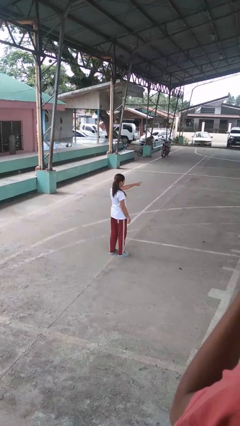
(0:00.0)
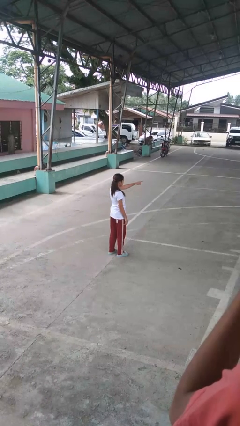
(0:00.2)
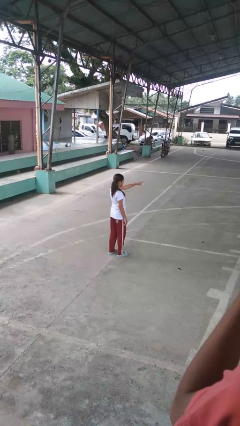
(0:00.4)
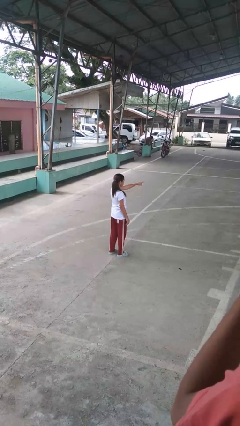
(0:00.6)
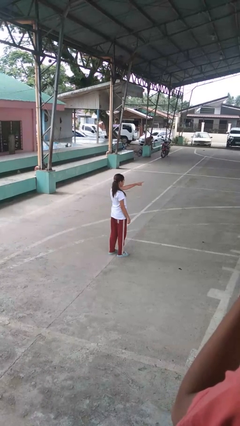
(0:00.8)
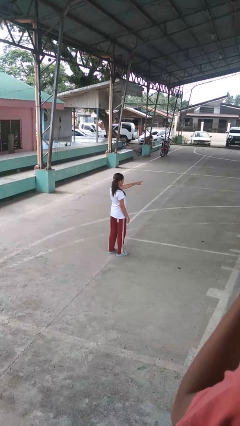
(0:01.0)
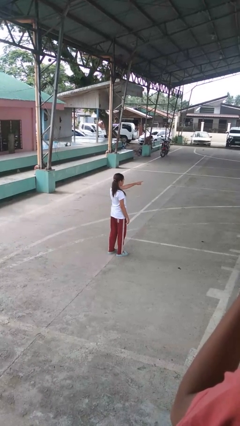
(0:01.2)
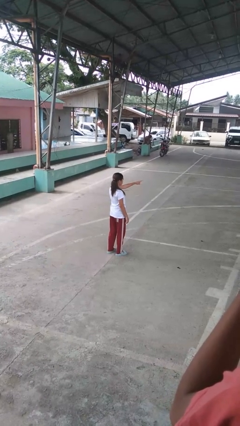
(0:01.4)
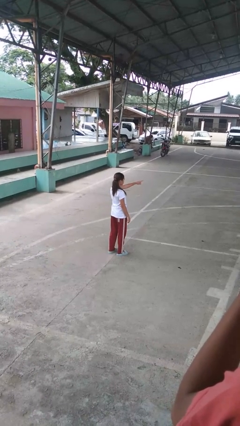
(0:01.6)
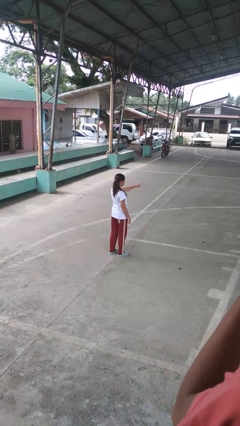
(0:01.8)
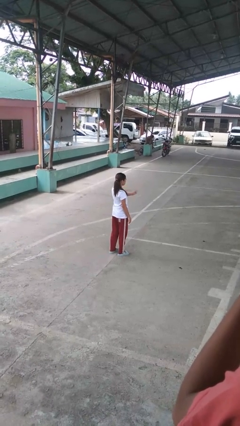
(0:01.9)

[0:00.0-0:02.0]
person points at person

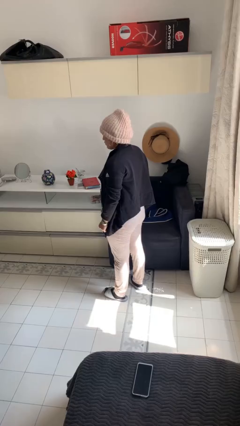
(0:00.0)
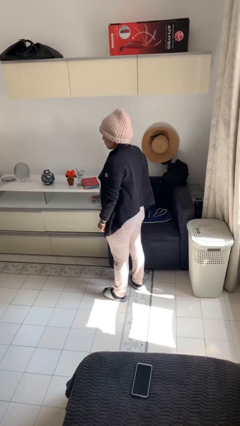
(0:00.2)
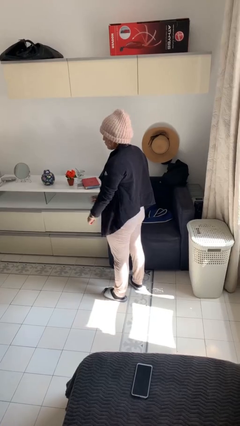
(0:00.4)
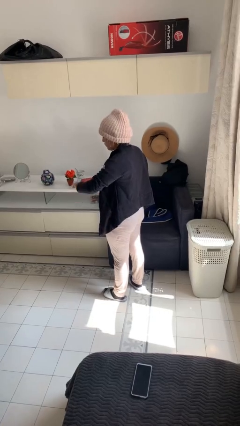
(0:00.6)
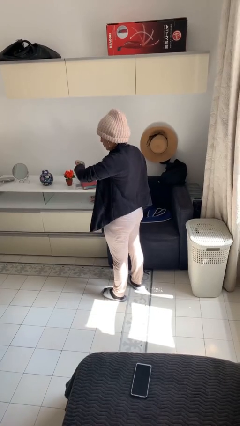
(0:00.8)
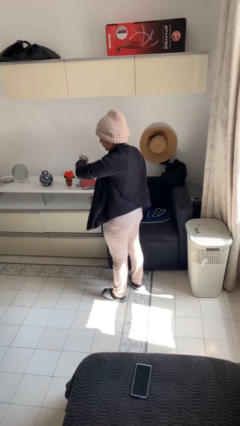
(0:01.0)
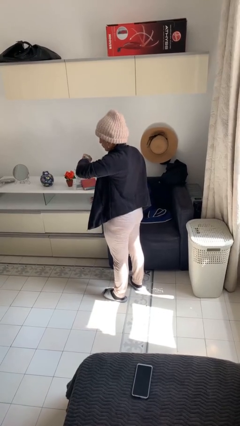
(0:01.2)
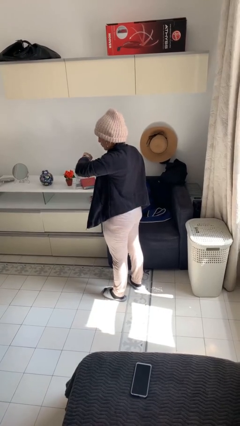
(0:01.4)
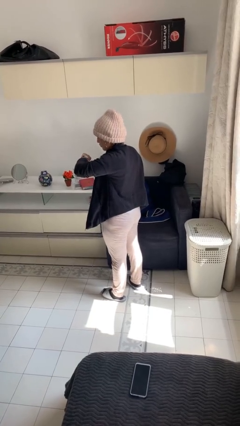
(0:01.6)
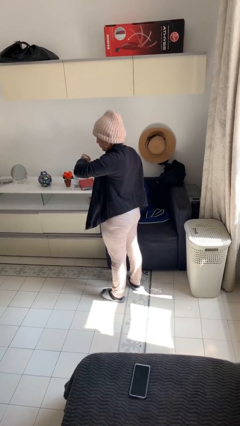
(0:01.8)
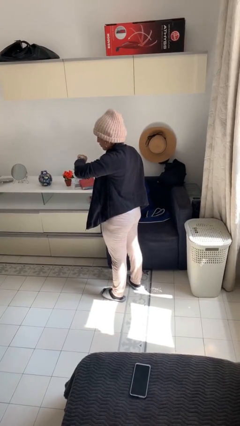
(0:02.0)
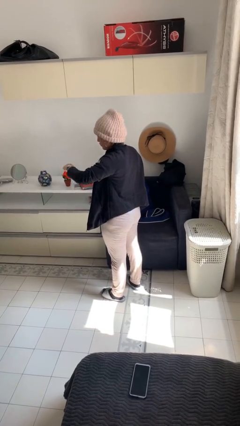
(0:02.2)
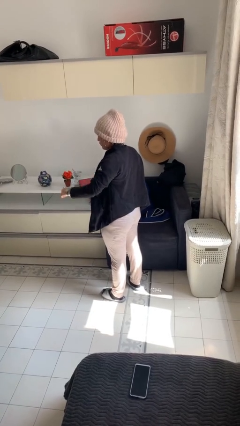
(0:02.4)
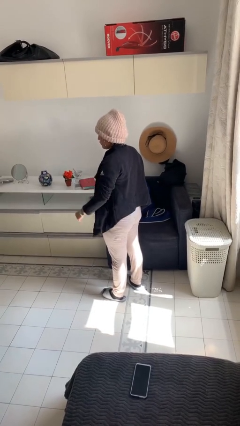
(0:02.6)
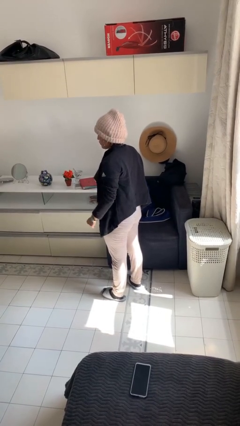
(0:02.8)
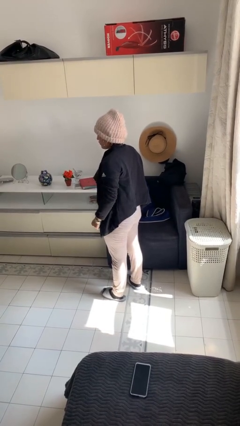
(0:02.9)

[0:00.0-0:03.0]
person looks at wristwatch

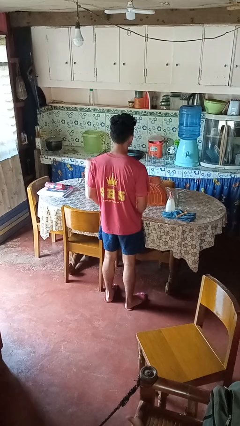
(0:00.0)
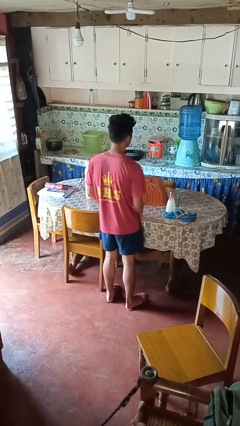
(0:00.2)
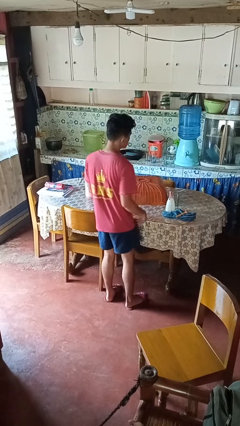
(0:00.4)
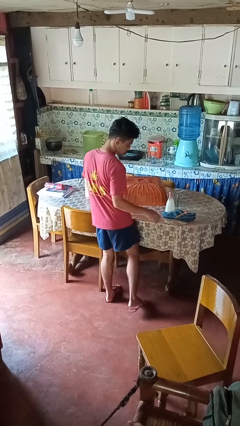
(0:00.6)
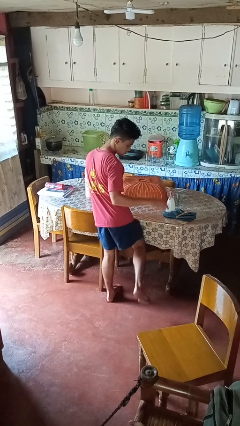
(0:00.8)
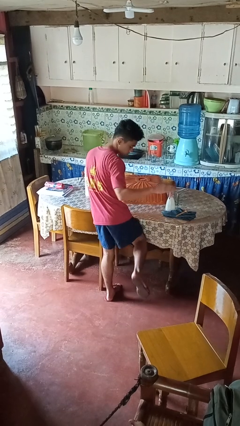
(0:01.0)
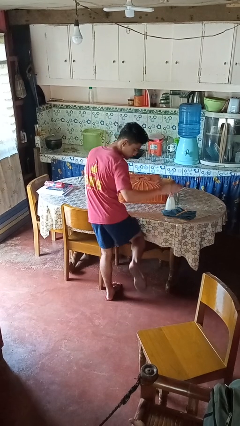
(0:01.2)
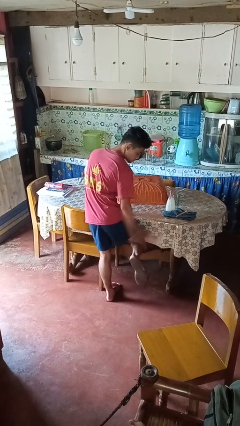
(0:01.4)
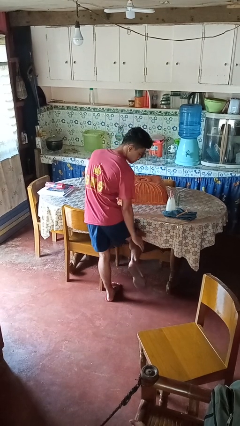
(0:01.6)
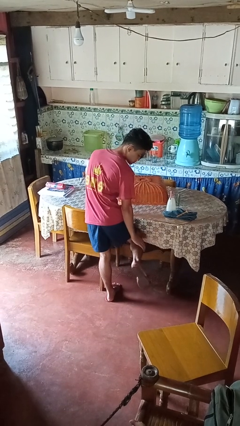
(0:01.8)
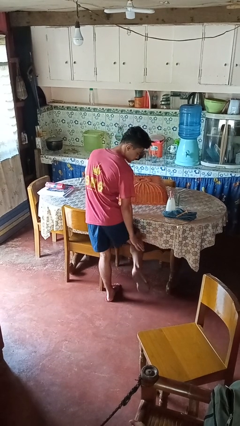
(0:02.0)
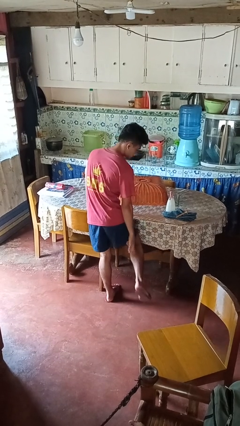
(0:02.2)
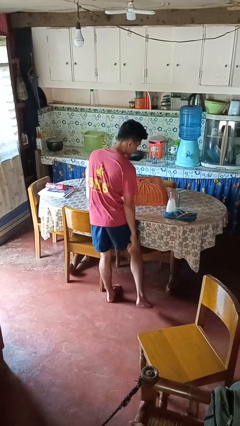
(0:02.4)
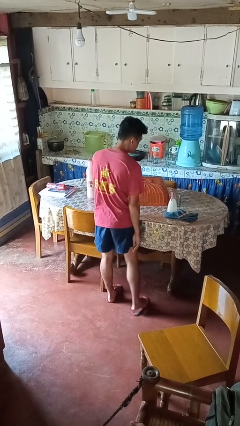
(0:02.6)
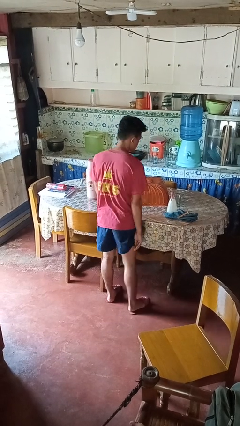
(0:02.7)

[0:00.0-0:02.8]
person swats bug

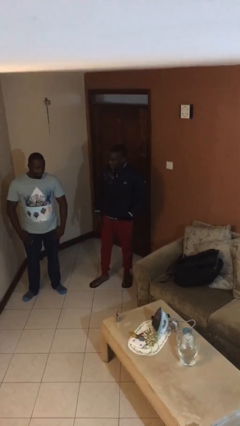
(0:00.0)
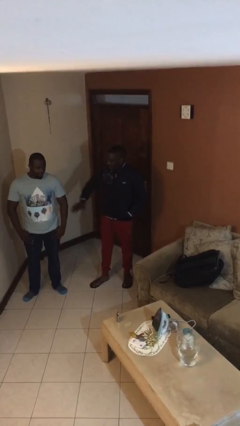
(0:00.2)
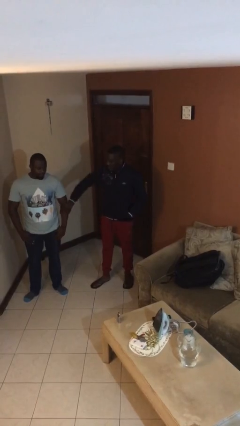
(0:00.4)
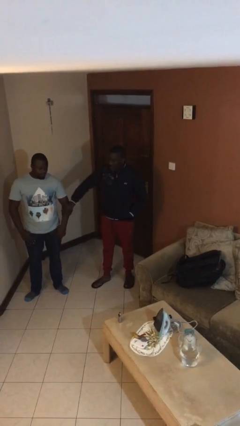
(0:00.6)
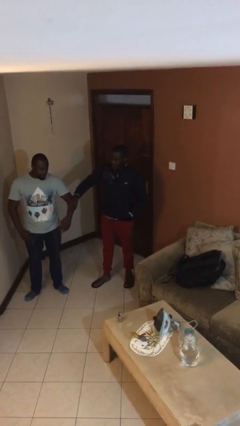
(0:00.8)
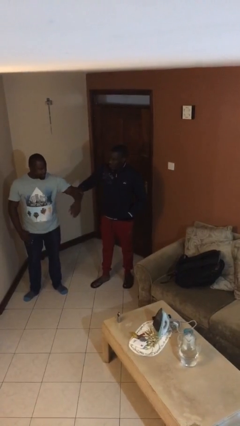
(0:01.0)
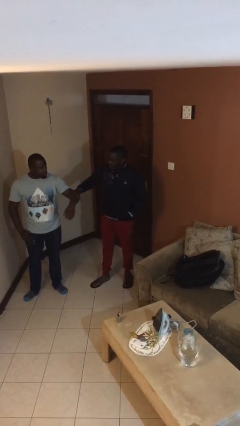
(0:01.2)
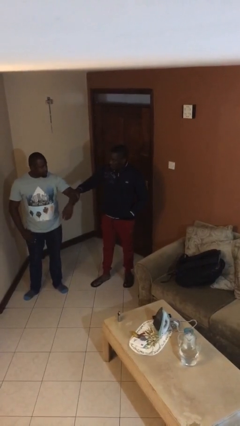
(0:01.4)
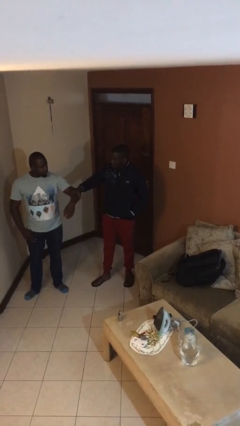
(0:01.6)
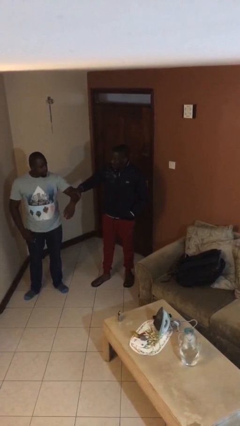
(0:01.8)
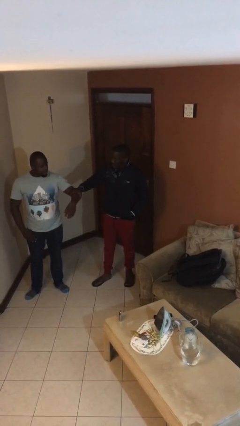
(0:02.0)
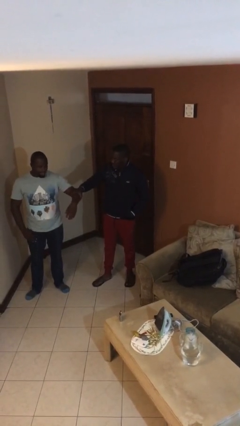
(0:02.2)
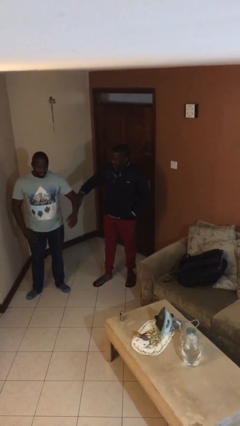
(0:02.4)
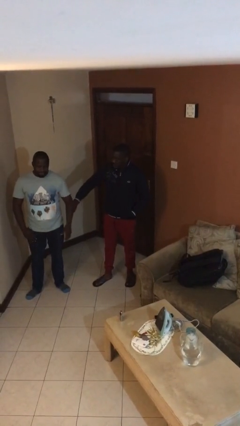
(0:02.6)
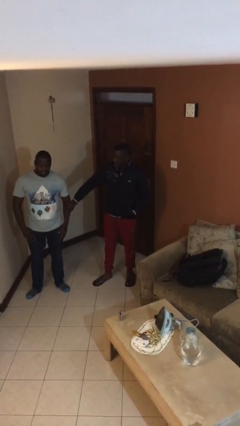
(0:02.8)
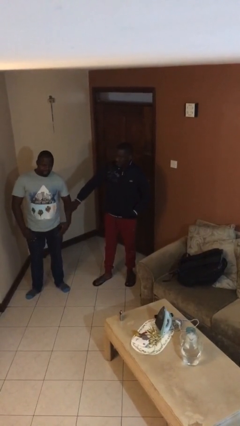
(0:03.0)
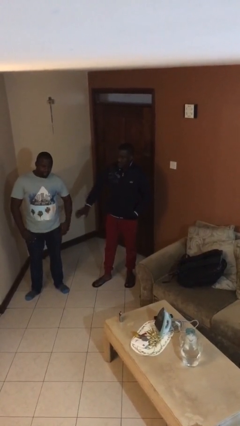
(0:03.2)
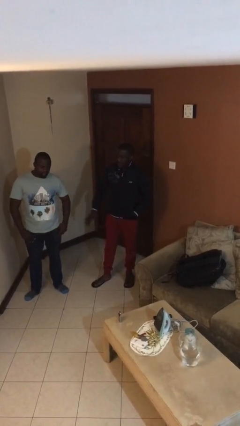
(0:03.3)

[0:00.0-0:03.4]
person grabs person by forearm

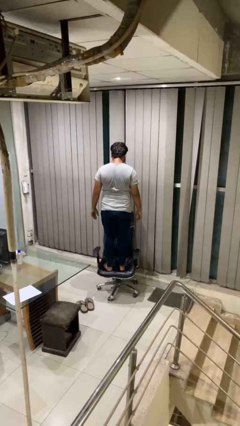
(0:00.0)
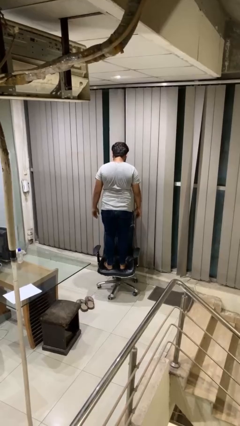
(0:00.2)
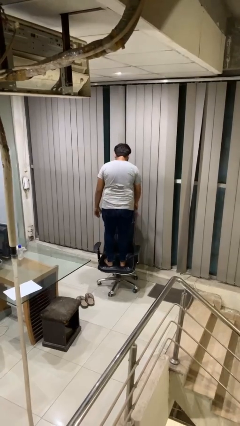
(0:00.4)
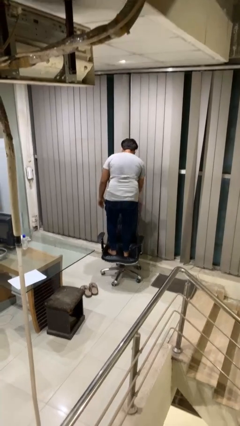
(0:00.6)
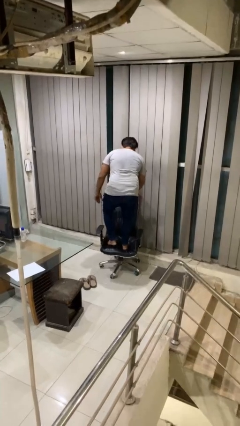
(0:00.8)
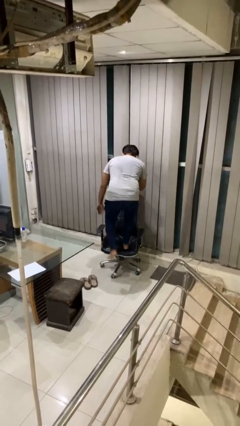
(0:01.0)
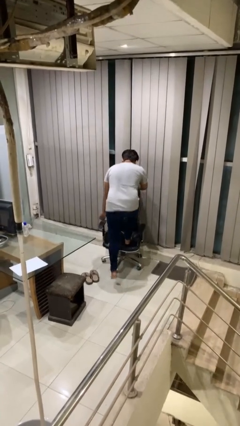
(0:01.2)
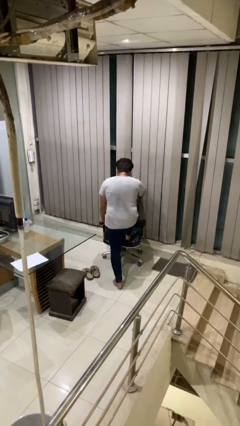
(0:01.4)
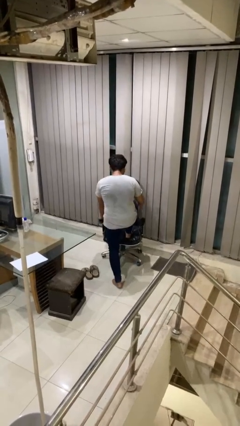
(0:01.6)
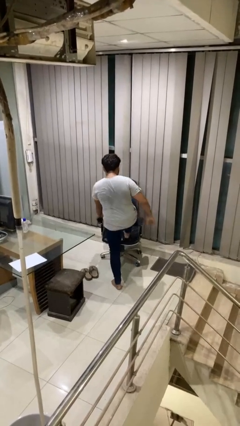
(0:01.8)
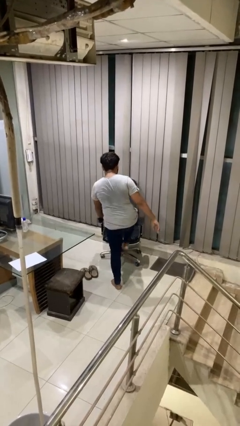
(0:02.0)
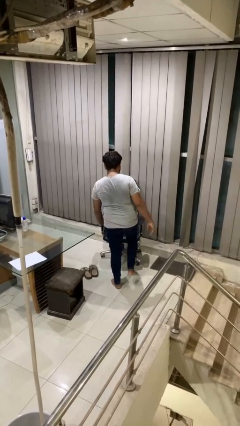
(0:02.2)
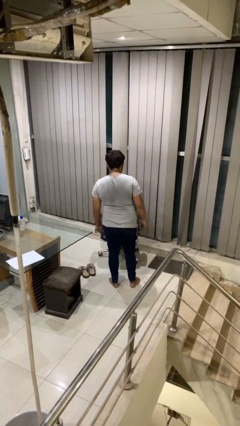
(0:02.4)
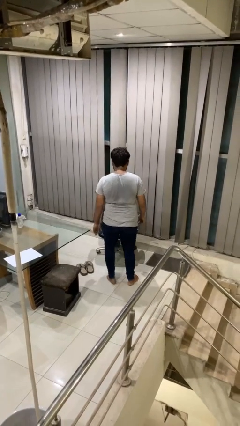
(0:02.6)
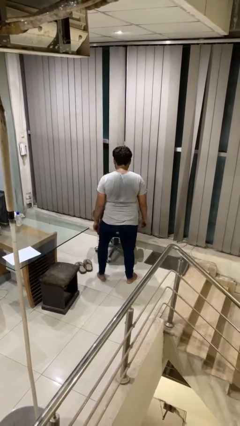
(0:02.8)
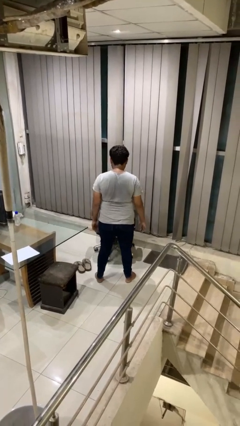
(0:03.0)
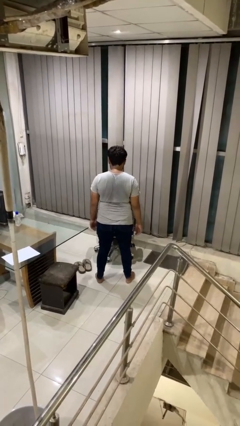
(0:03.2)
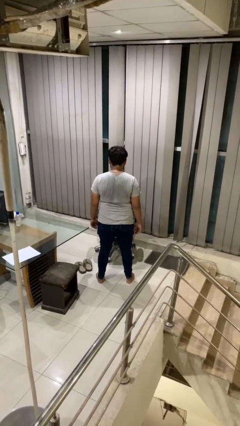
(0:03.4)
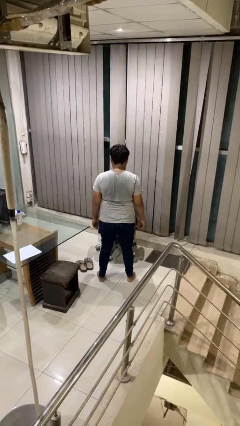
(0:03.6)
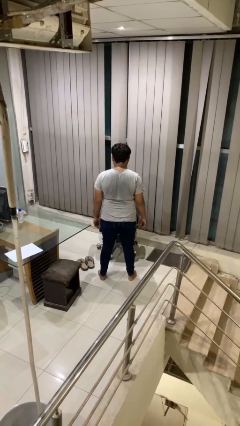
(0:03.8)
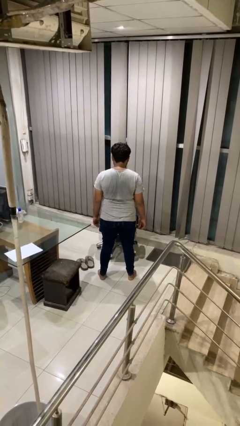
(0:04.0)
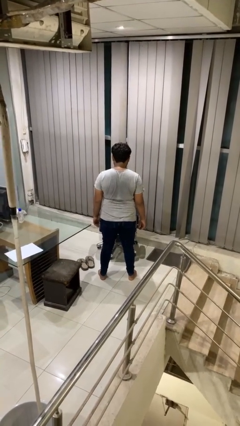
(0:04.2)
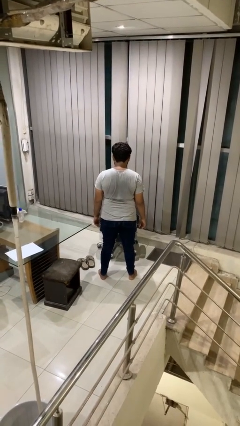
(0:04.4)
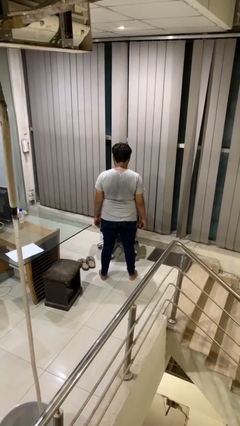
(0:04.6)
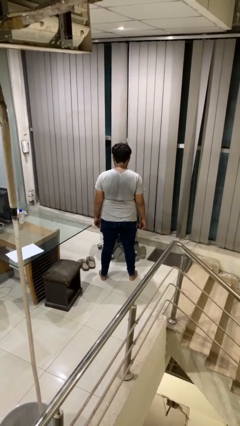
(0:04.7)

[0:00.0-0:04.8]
person climbs off chair

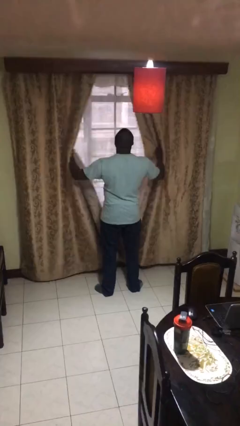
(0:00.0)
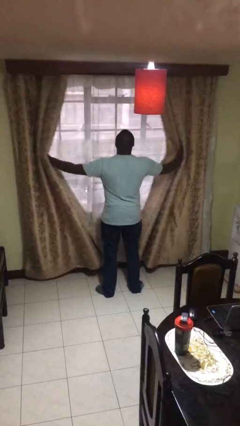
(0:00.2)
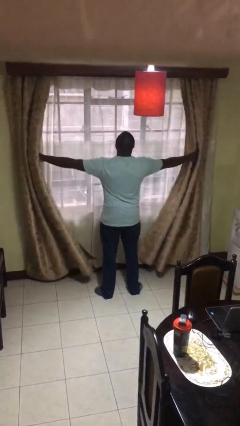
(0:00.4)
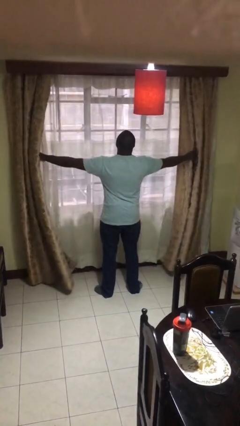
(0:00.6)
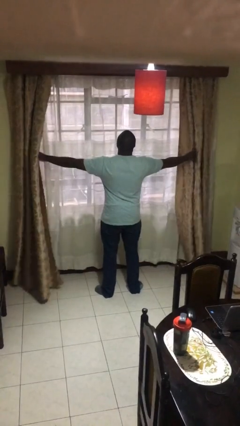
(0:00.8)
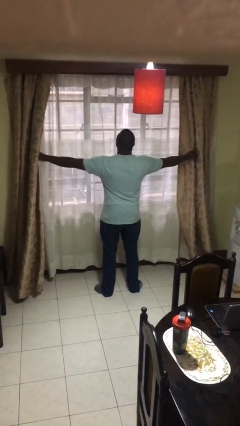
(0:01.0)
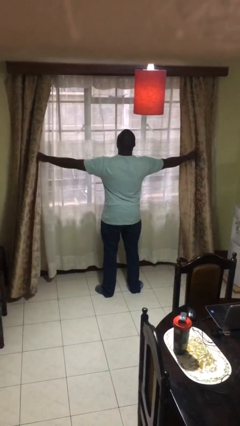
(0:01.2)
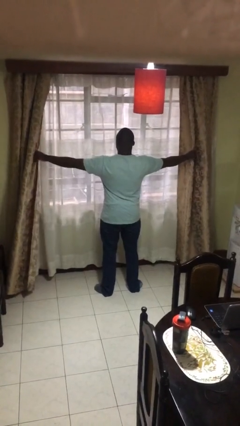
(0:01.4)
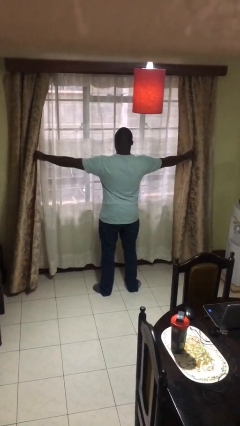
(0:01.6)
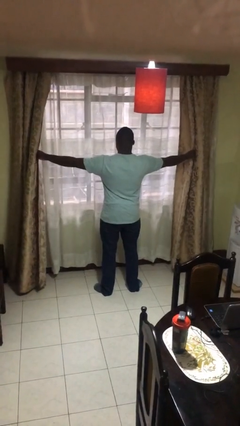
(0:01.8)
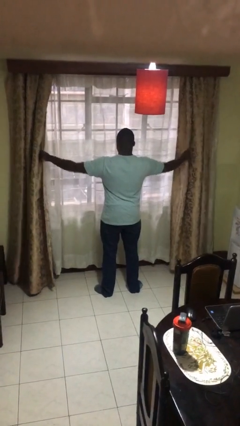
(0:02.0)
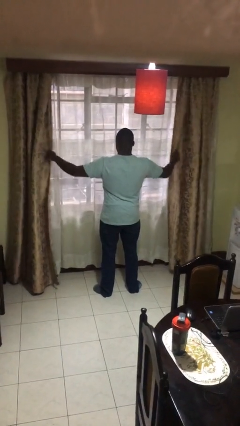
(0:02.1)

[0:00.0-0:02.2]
person opens curtains
